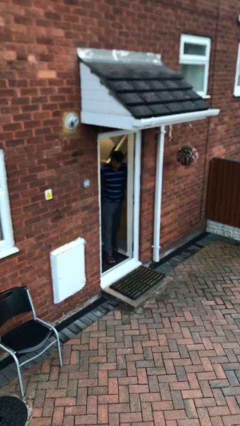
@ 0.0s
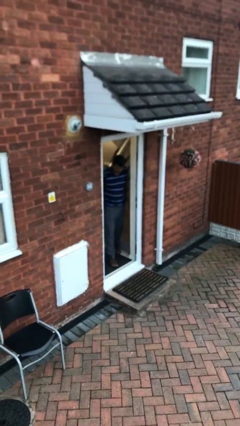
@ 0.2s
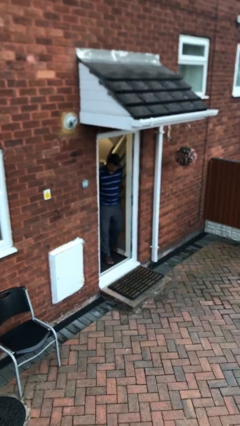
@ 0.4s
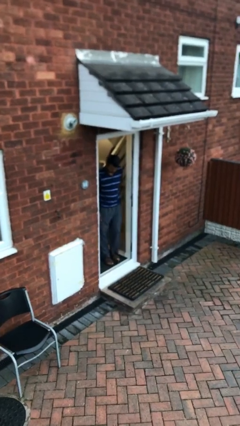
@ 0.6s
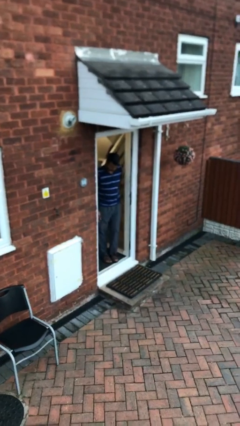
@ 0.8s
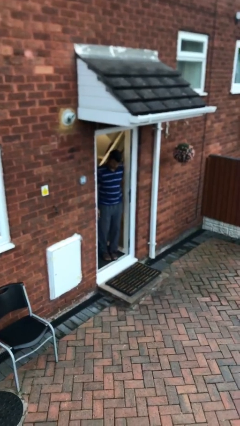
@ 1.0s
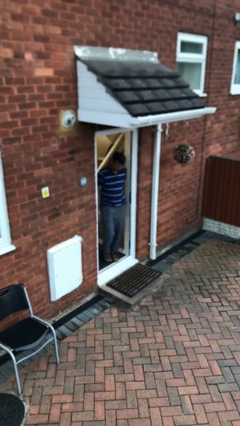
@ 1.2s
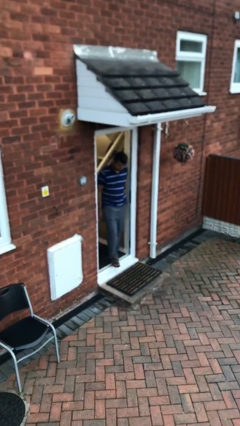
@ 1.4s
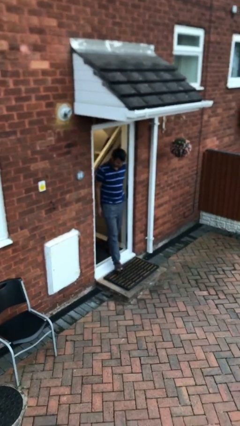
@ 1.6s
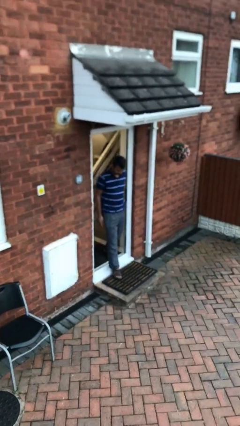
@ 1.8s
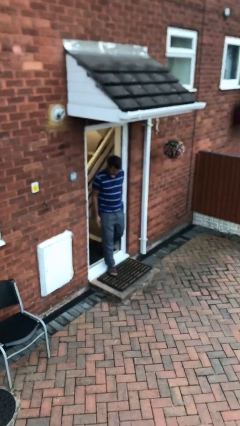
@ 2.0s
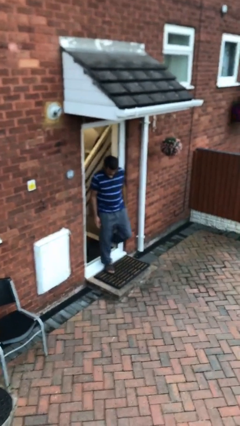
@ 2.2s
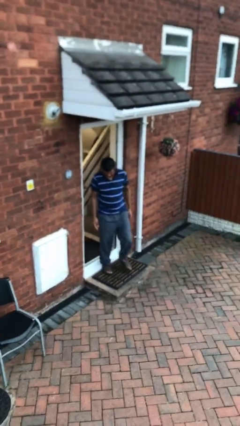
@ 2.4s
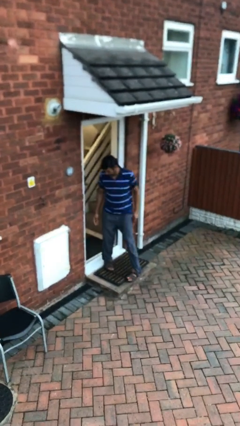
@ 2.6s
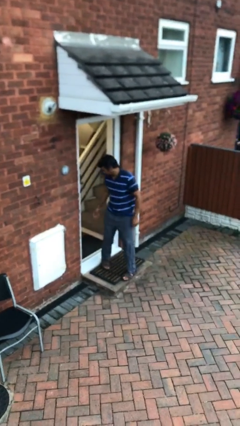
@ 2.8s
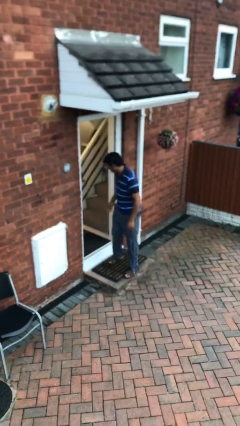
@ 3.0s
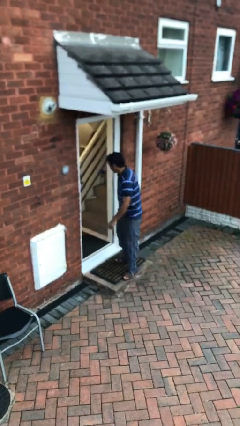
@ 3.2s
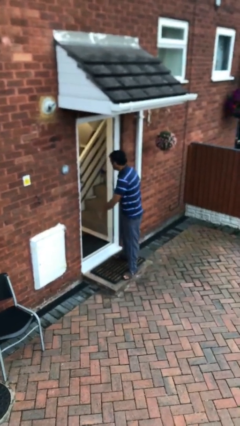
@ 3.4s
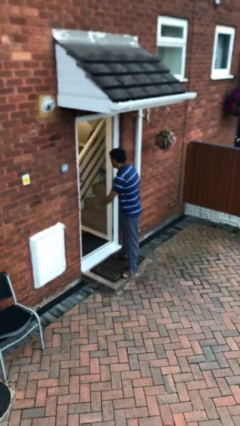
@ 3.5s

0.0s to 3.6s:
person enters scene through structure

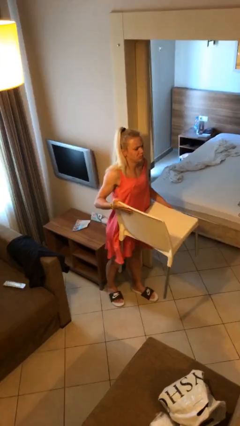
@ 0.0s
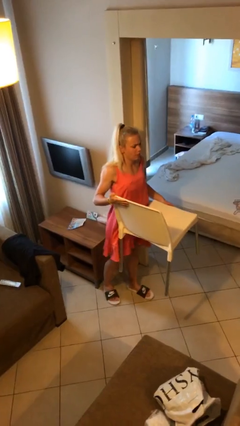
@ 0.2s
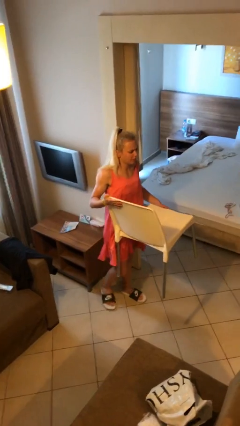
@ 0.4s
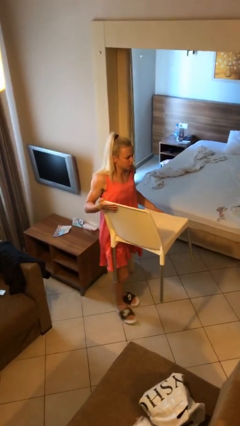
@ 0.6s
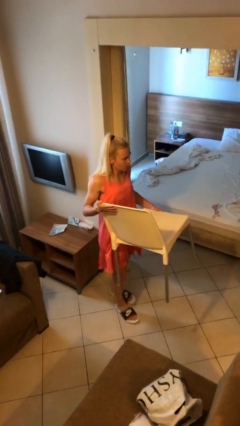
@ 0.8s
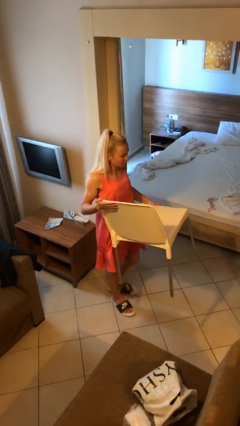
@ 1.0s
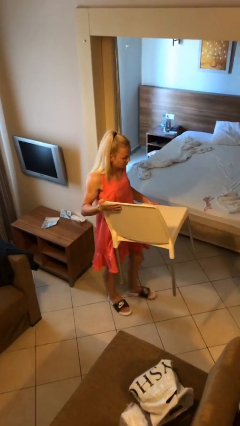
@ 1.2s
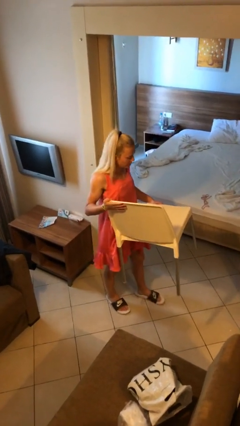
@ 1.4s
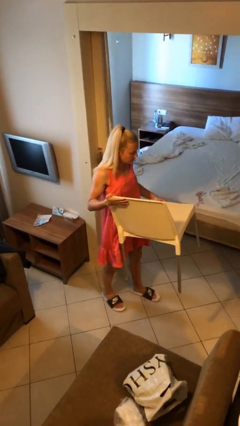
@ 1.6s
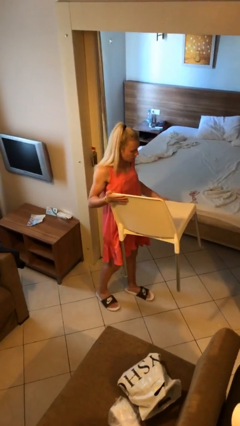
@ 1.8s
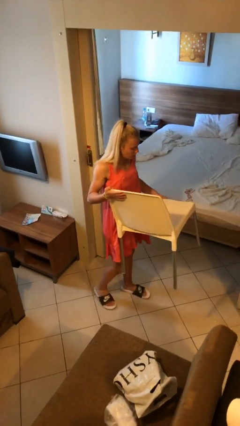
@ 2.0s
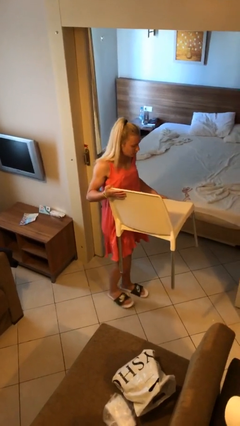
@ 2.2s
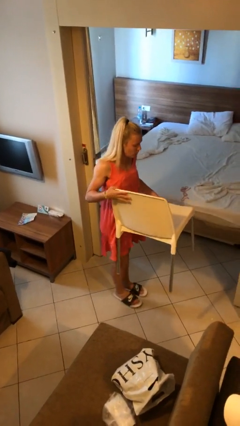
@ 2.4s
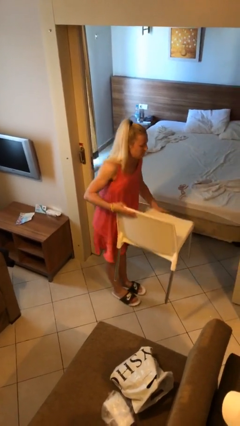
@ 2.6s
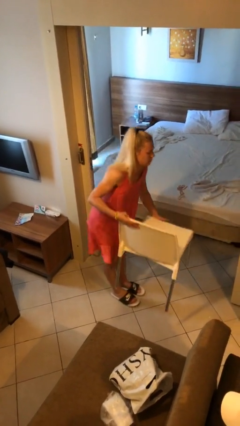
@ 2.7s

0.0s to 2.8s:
person carries heavy object

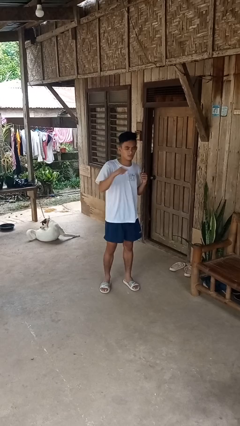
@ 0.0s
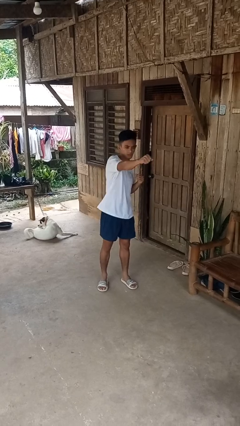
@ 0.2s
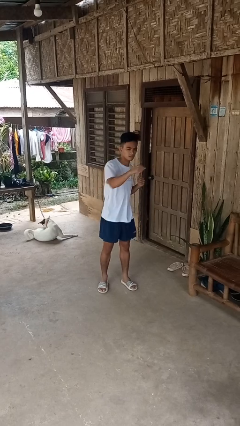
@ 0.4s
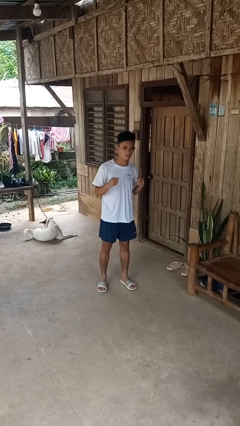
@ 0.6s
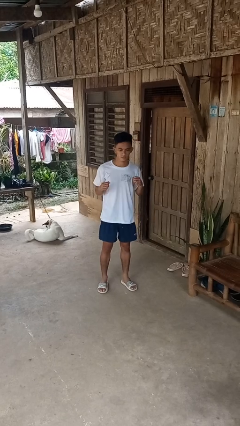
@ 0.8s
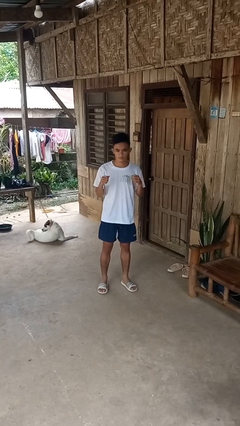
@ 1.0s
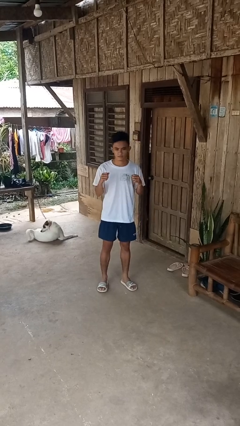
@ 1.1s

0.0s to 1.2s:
person punches

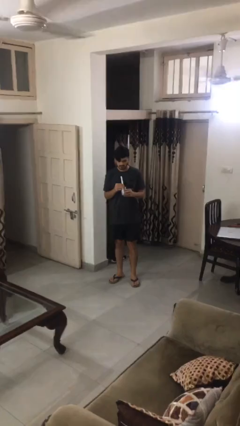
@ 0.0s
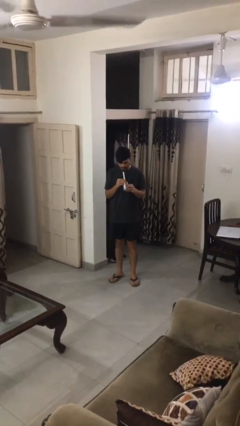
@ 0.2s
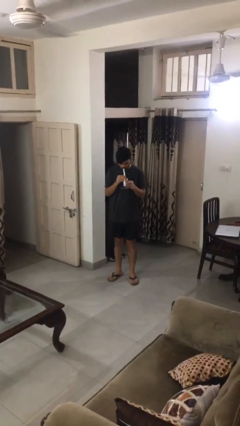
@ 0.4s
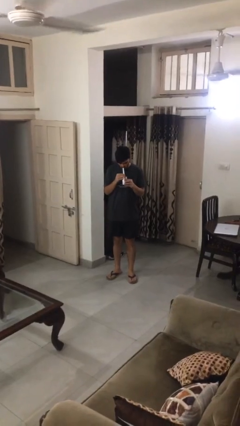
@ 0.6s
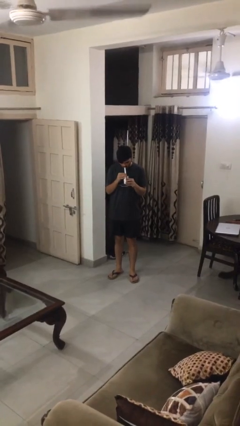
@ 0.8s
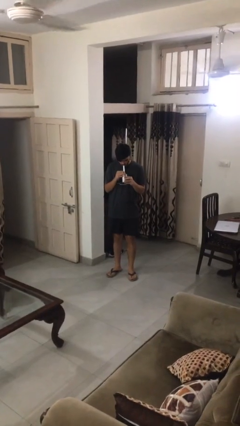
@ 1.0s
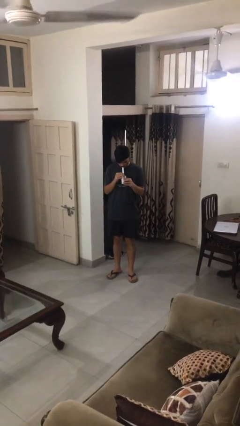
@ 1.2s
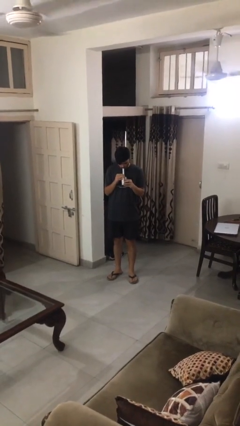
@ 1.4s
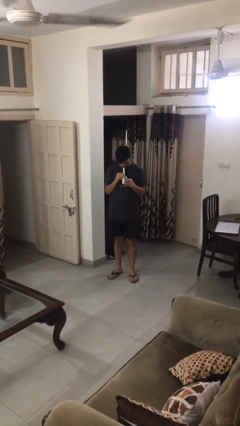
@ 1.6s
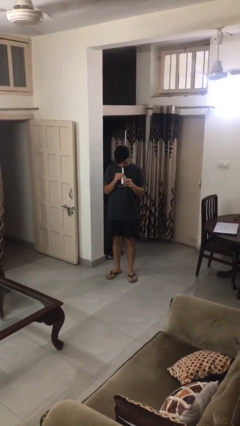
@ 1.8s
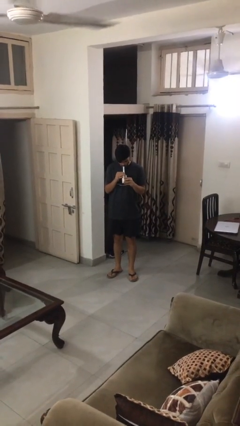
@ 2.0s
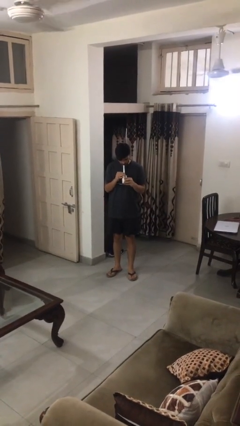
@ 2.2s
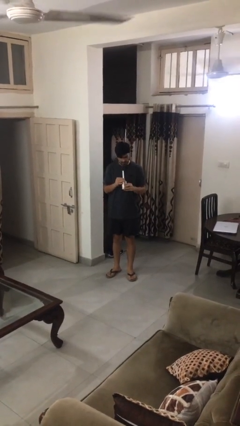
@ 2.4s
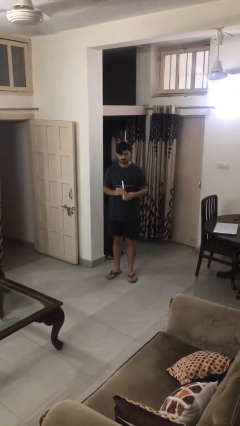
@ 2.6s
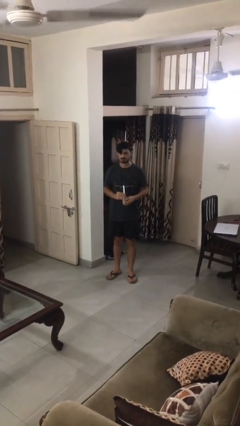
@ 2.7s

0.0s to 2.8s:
person drinks from straw

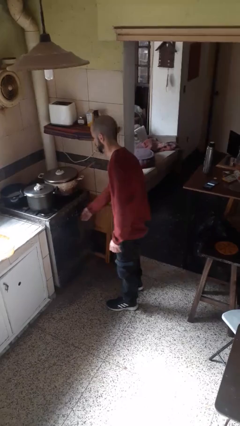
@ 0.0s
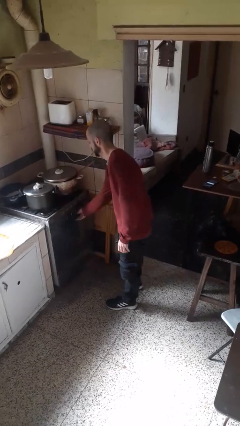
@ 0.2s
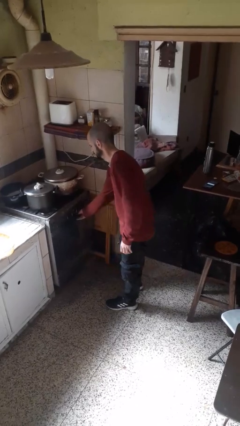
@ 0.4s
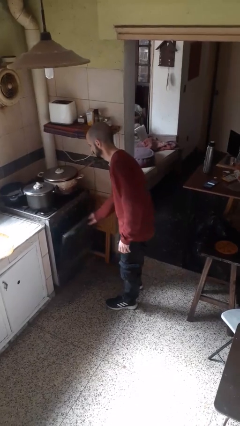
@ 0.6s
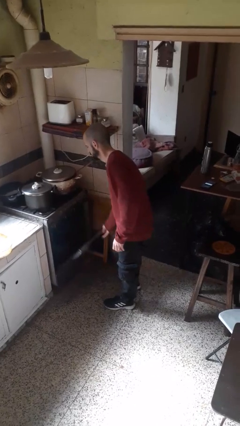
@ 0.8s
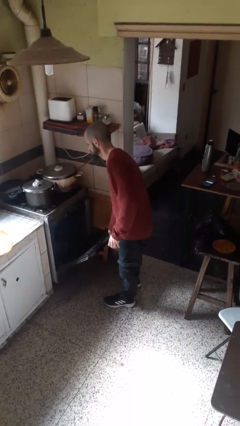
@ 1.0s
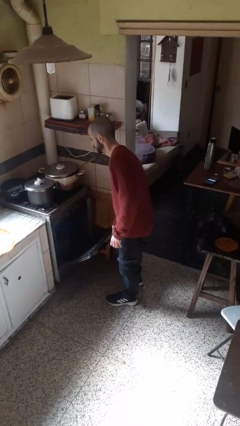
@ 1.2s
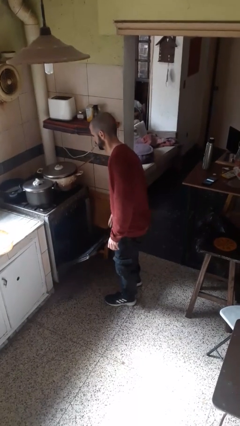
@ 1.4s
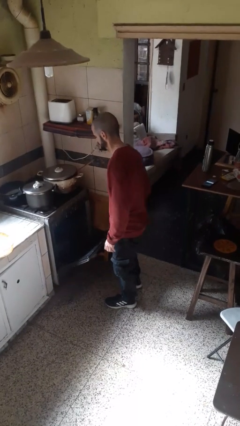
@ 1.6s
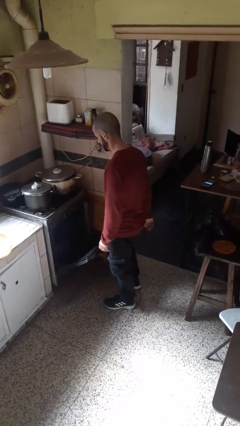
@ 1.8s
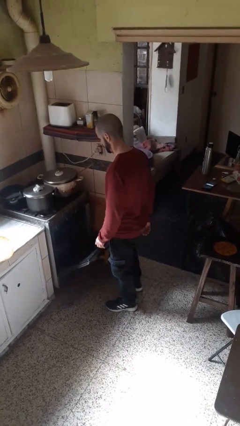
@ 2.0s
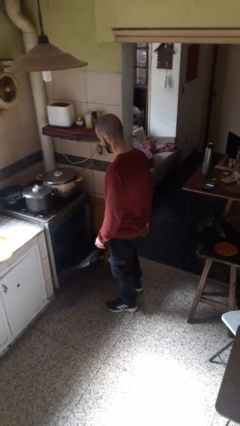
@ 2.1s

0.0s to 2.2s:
person opens oven door

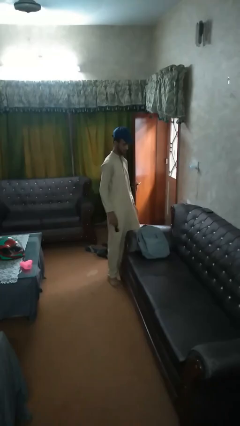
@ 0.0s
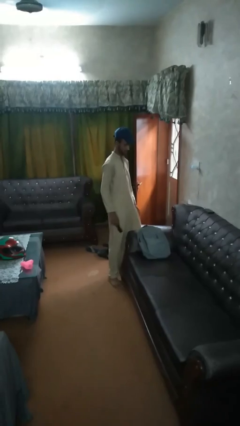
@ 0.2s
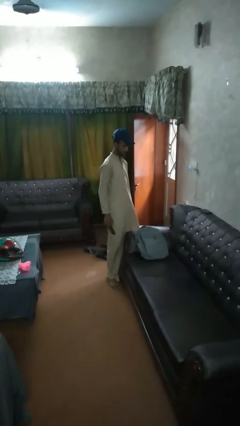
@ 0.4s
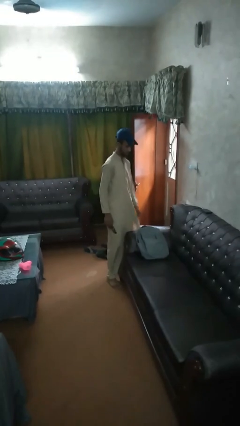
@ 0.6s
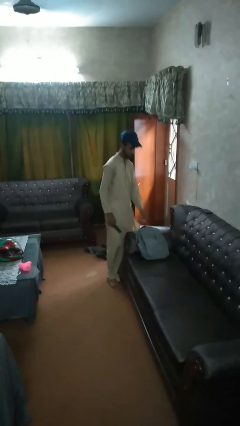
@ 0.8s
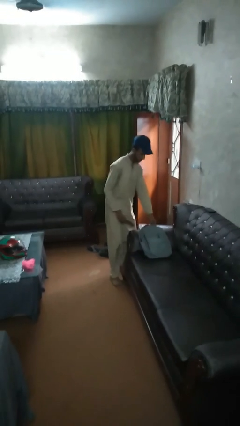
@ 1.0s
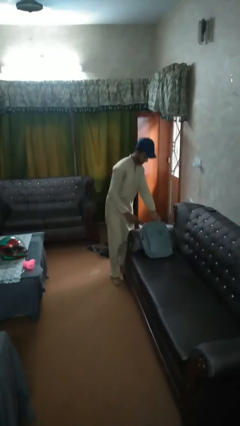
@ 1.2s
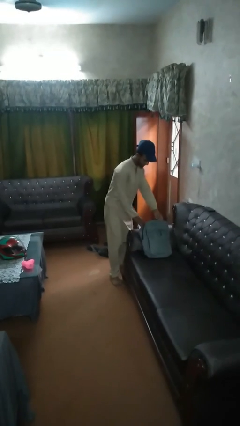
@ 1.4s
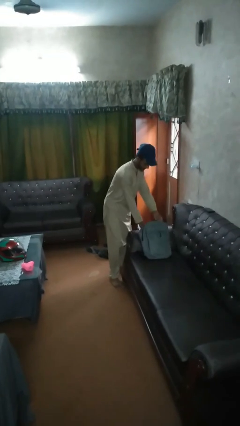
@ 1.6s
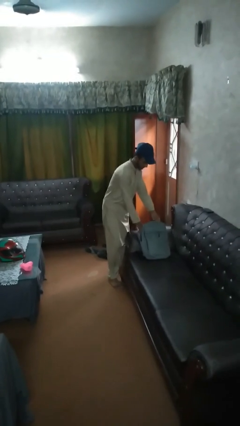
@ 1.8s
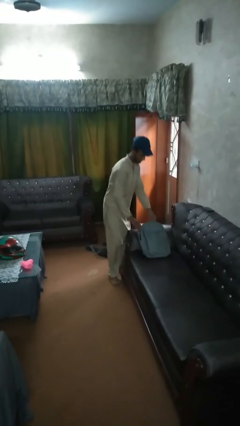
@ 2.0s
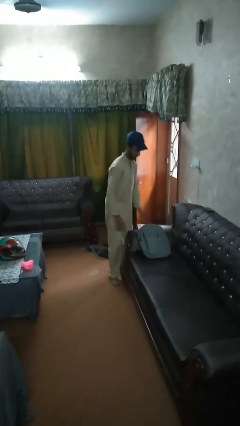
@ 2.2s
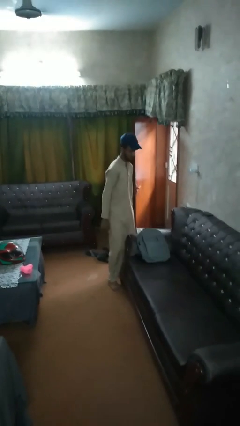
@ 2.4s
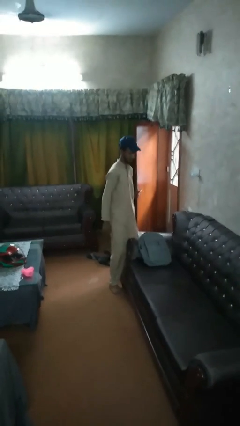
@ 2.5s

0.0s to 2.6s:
person puts object into bag

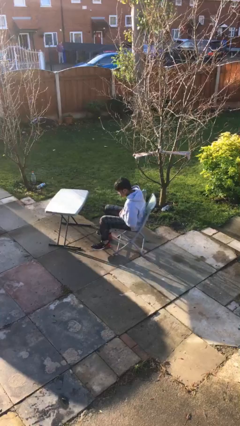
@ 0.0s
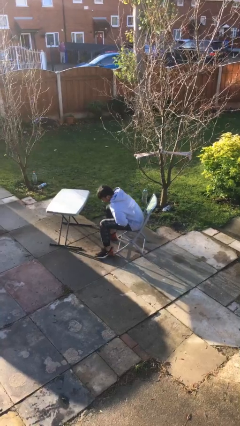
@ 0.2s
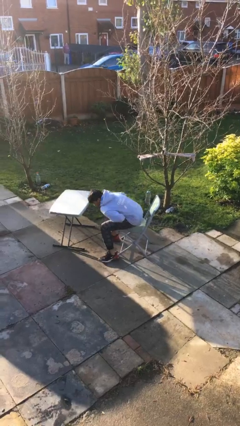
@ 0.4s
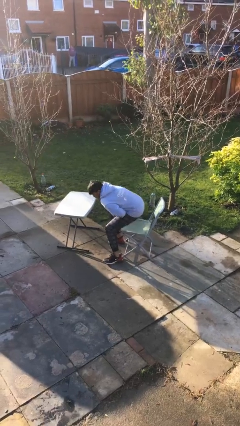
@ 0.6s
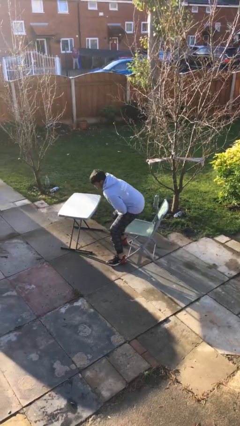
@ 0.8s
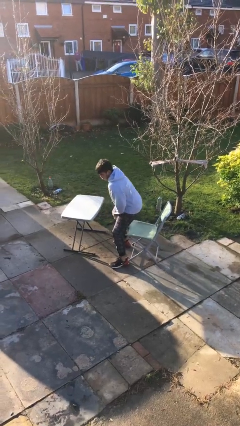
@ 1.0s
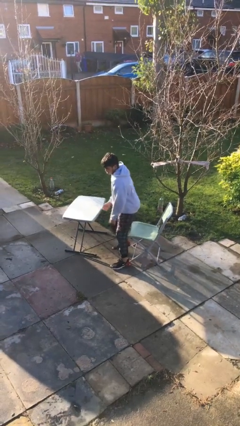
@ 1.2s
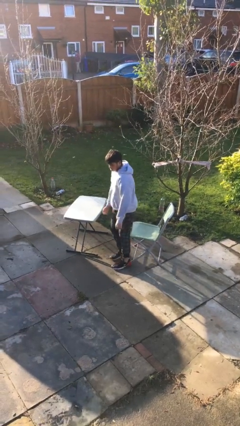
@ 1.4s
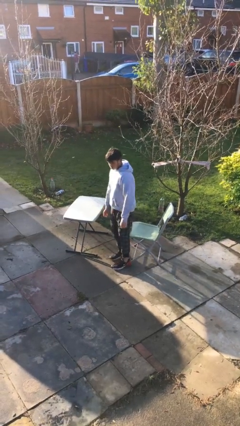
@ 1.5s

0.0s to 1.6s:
person stands up

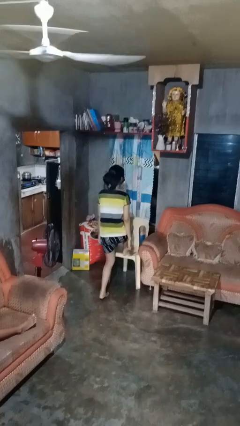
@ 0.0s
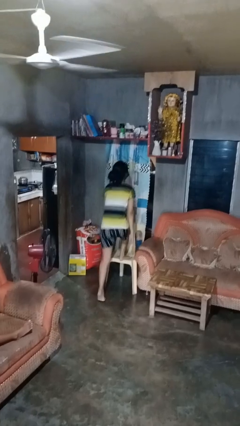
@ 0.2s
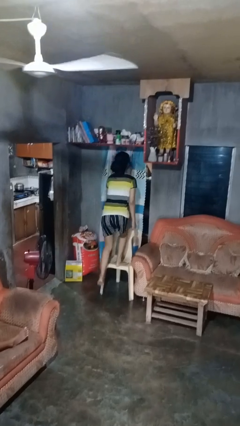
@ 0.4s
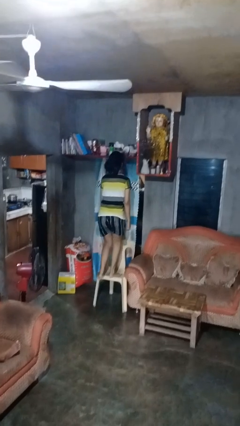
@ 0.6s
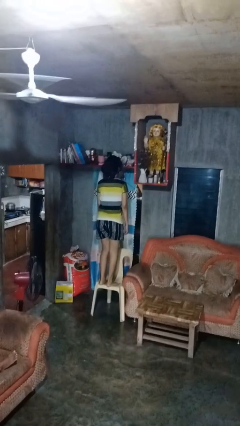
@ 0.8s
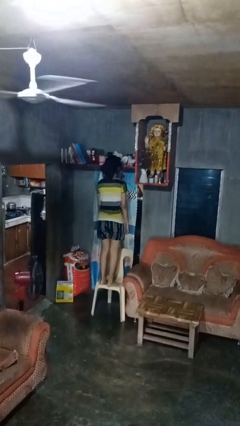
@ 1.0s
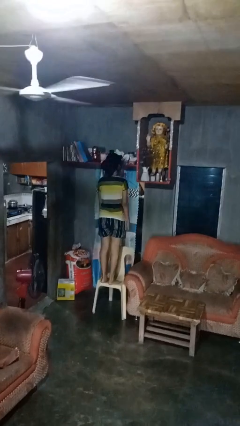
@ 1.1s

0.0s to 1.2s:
person climbs on chair
